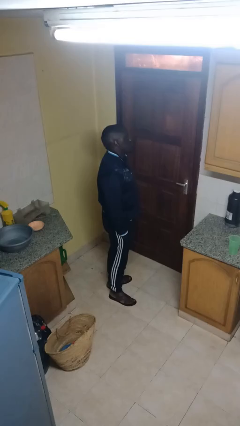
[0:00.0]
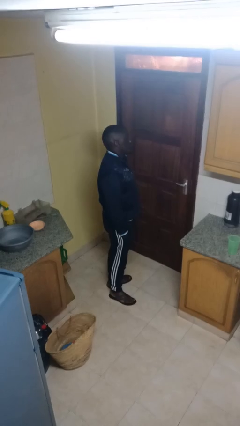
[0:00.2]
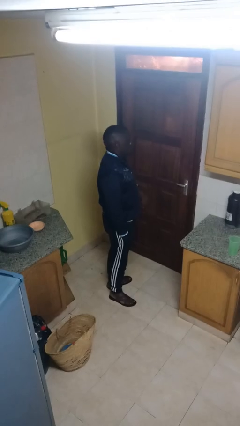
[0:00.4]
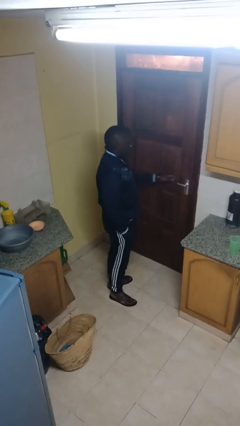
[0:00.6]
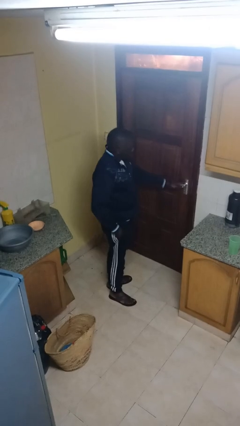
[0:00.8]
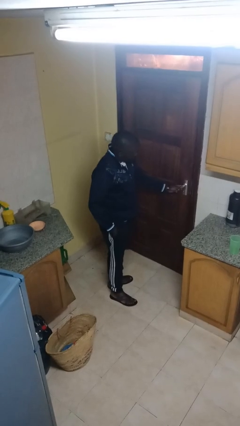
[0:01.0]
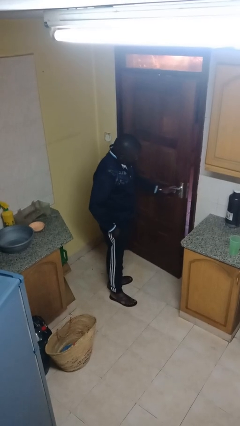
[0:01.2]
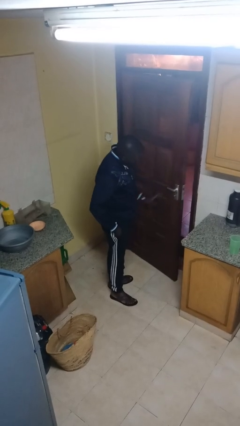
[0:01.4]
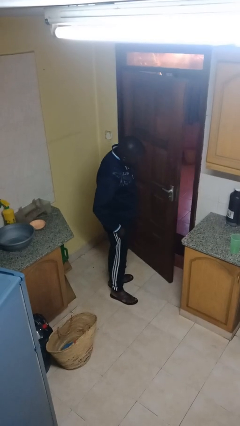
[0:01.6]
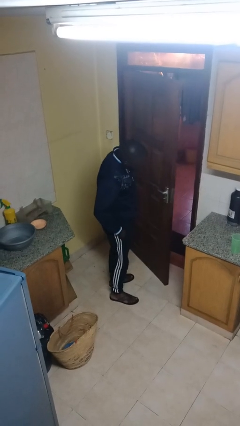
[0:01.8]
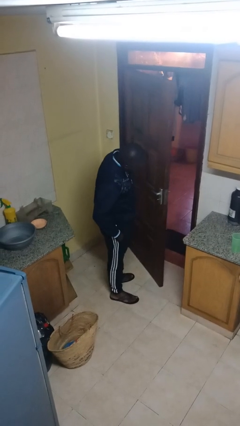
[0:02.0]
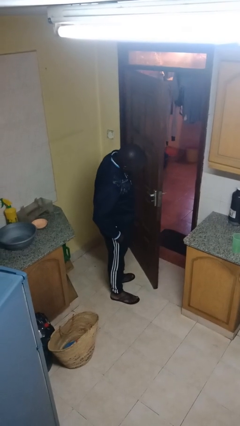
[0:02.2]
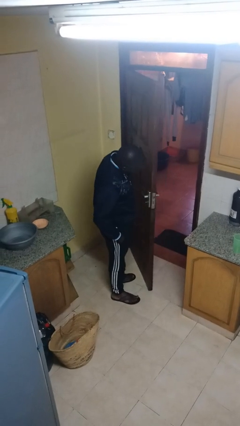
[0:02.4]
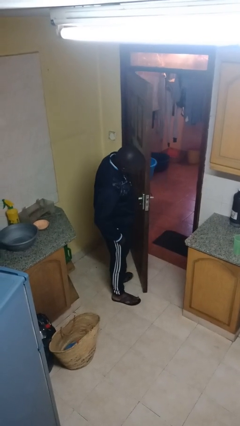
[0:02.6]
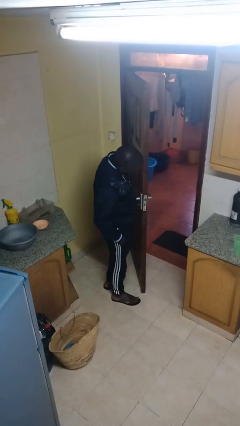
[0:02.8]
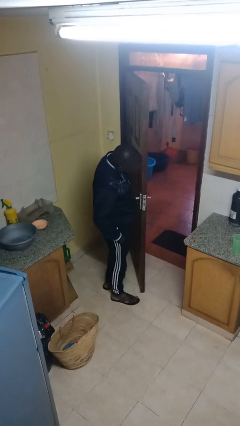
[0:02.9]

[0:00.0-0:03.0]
person opens facility door

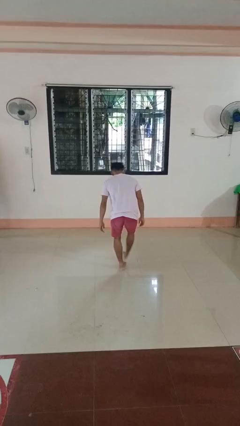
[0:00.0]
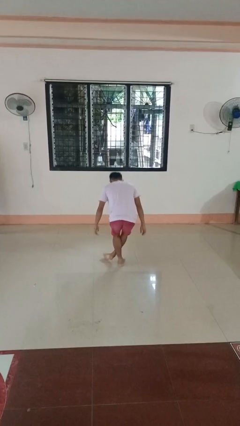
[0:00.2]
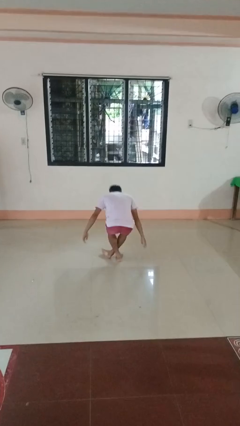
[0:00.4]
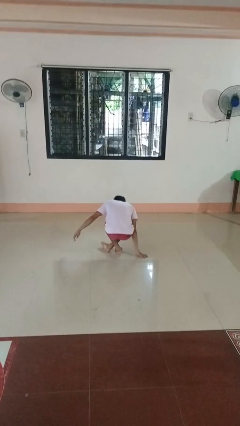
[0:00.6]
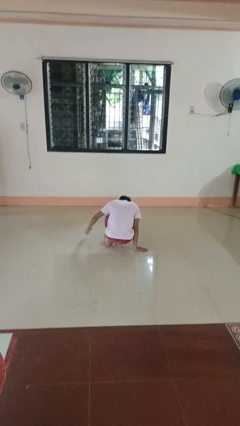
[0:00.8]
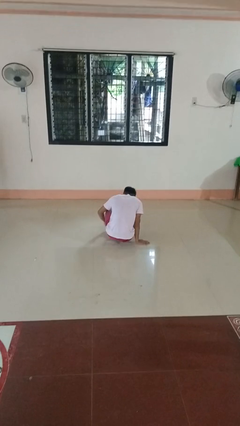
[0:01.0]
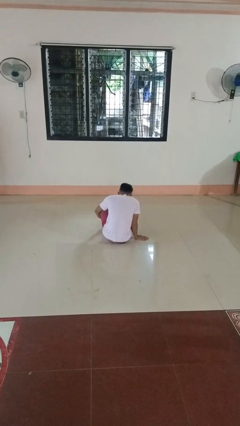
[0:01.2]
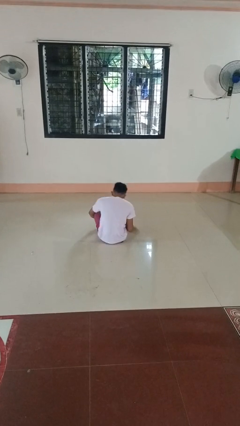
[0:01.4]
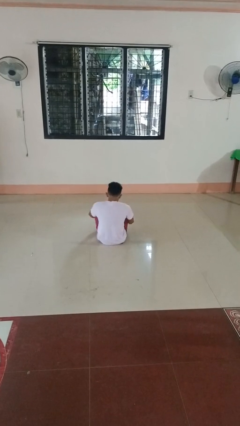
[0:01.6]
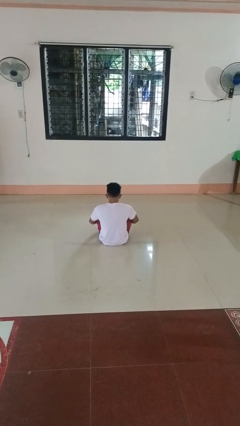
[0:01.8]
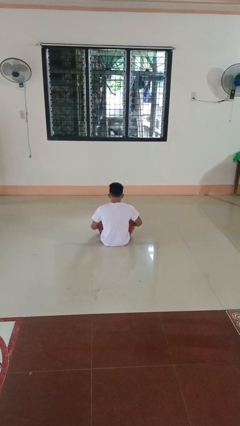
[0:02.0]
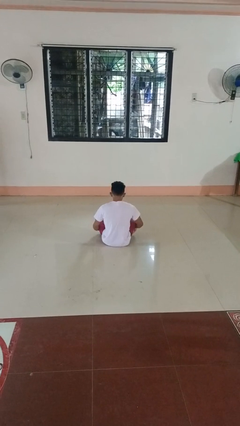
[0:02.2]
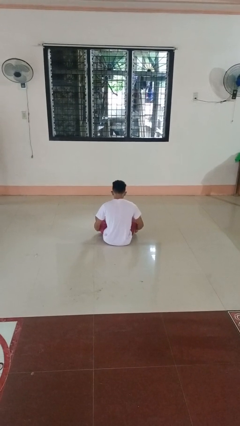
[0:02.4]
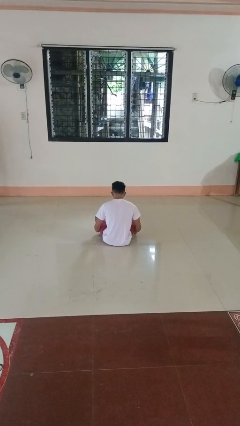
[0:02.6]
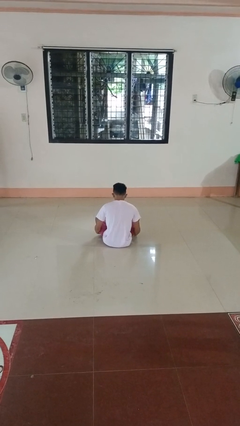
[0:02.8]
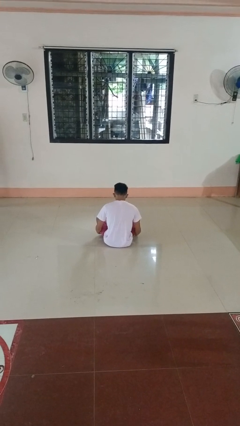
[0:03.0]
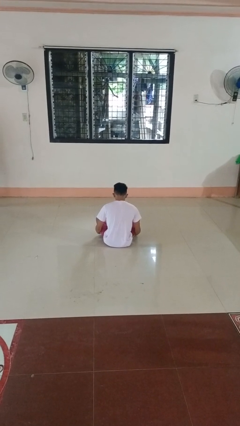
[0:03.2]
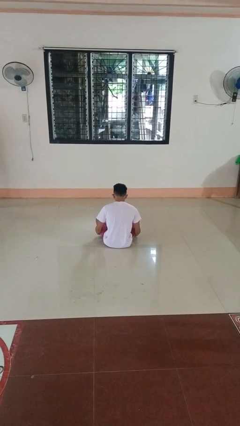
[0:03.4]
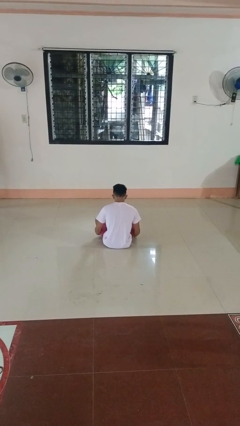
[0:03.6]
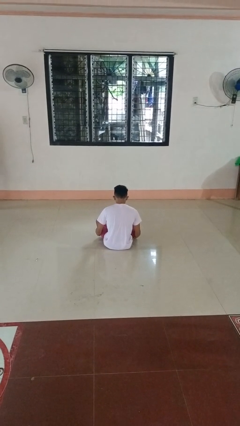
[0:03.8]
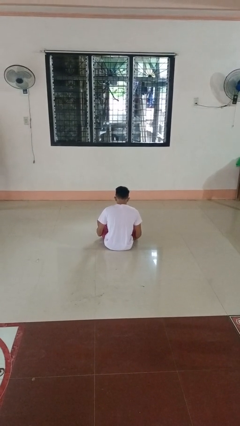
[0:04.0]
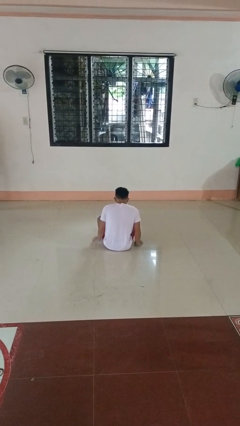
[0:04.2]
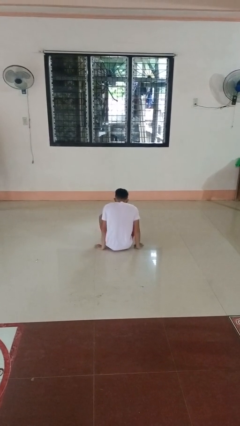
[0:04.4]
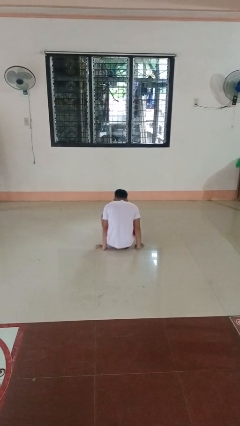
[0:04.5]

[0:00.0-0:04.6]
person sits crisscross

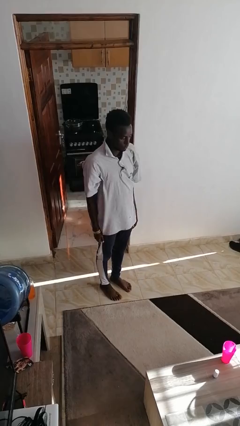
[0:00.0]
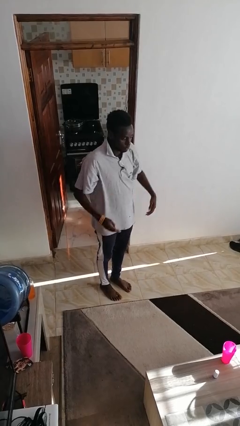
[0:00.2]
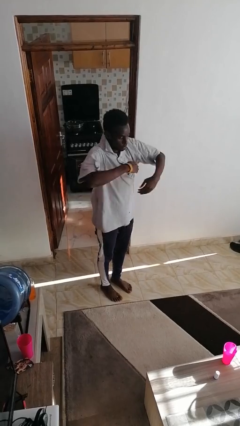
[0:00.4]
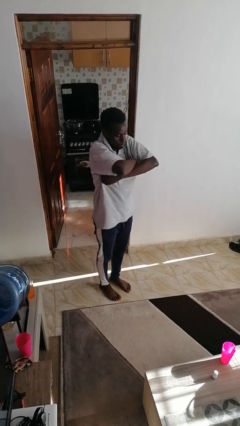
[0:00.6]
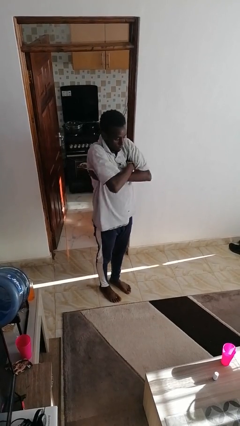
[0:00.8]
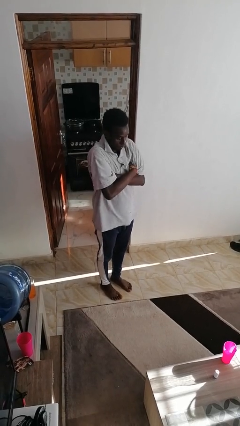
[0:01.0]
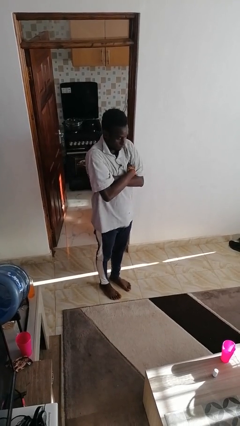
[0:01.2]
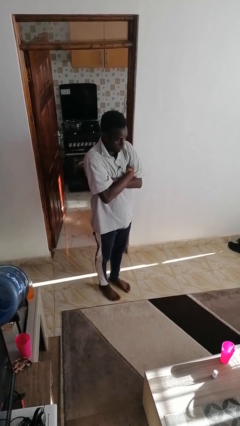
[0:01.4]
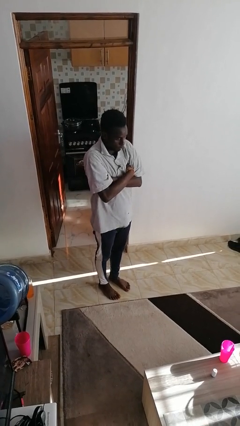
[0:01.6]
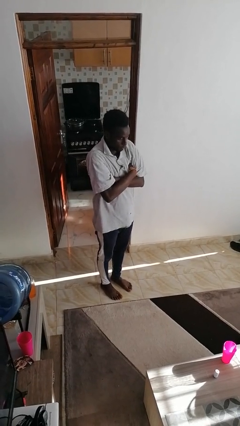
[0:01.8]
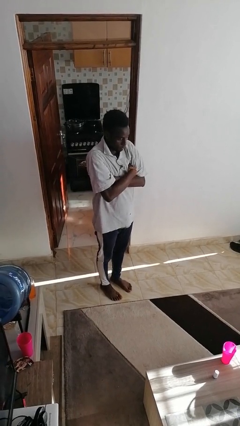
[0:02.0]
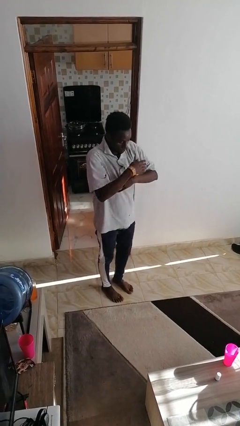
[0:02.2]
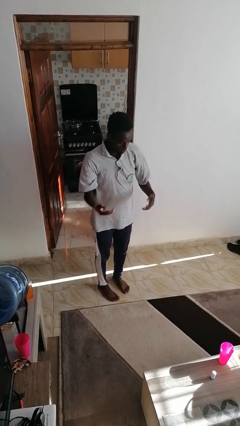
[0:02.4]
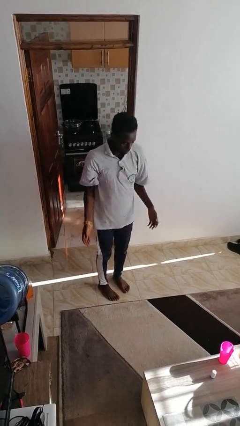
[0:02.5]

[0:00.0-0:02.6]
person crosses arms

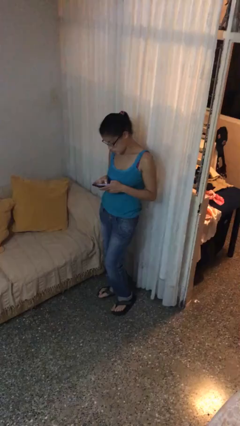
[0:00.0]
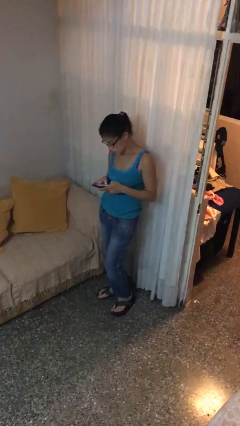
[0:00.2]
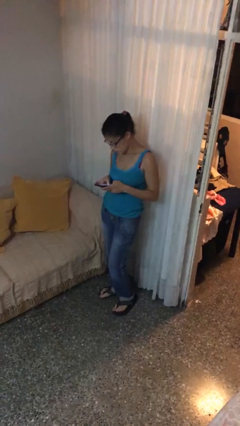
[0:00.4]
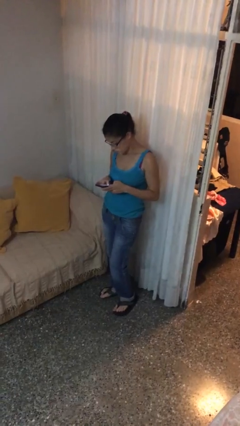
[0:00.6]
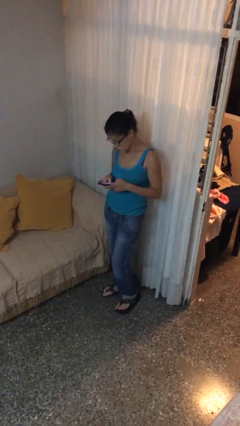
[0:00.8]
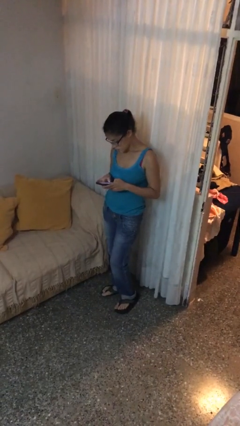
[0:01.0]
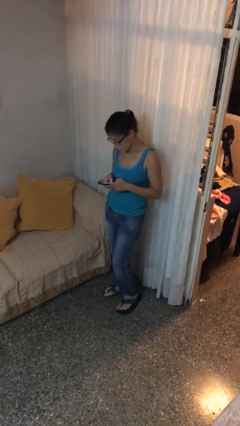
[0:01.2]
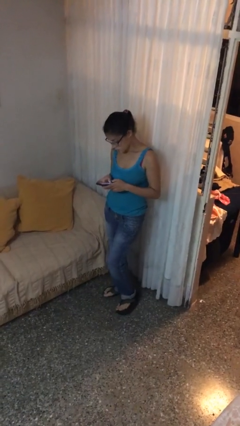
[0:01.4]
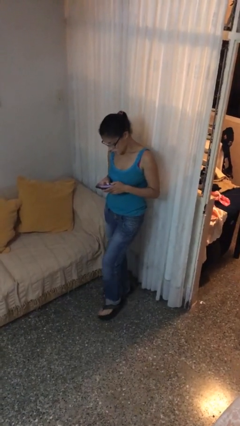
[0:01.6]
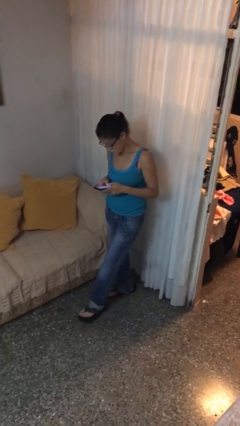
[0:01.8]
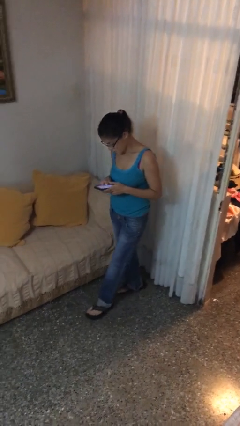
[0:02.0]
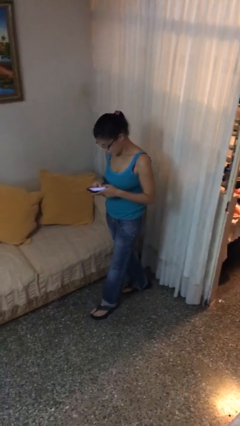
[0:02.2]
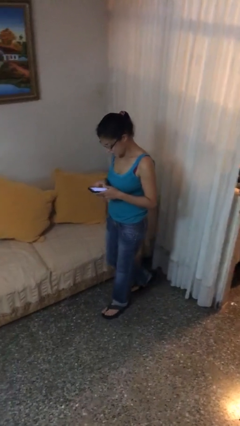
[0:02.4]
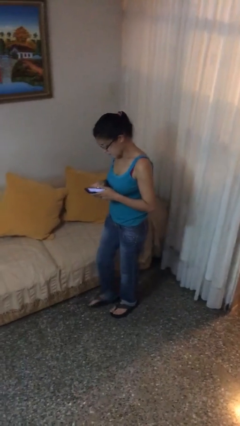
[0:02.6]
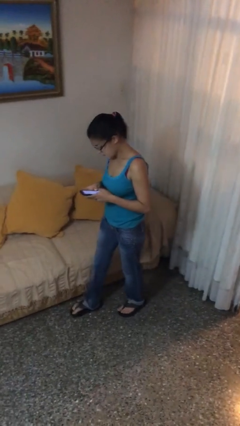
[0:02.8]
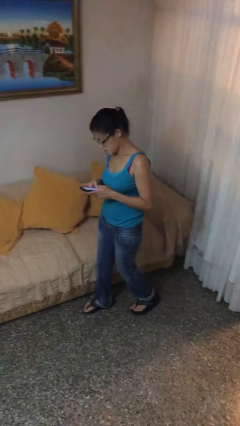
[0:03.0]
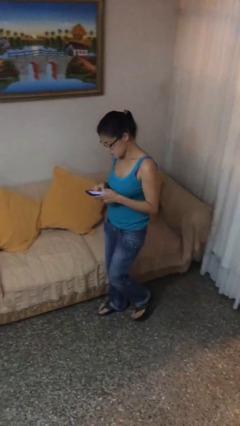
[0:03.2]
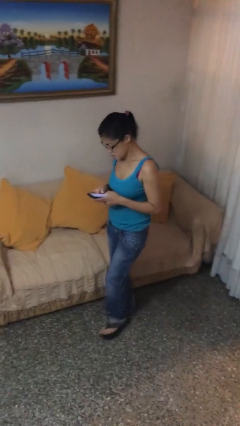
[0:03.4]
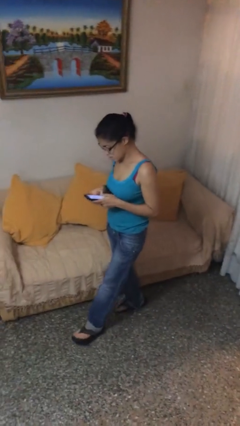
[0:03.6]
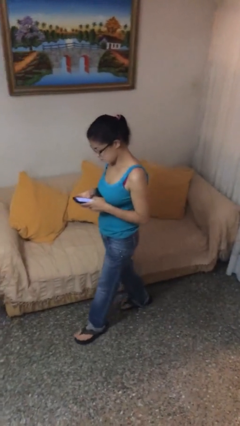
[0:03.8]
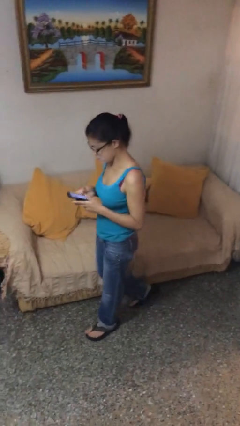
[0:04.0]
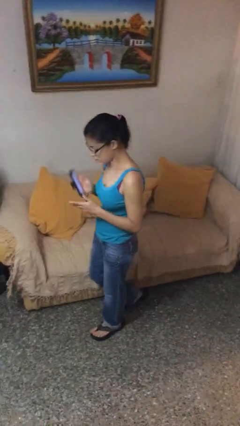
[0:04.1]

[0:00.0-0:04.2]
person texts on phone

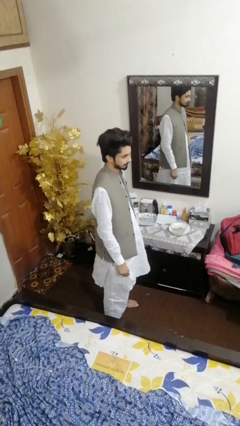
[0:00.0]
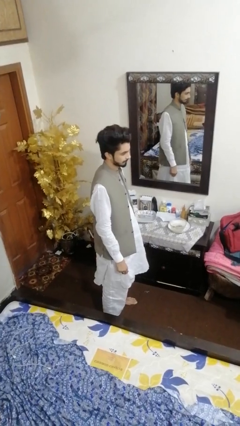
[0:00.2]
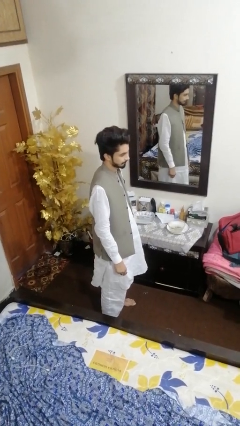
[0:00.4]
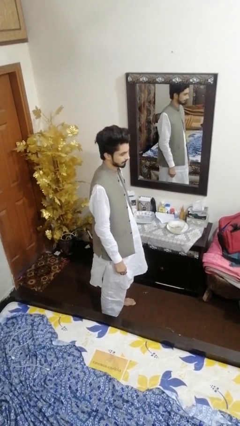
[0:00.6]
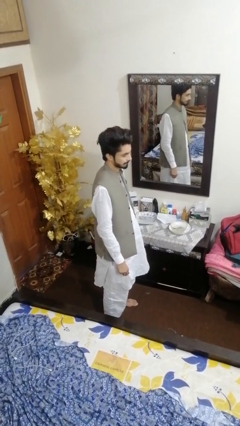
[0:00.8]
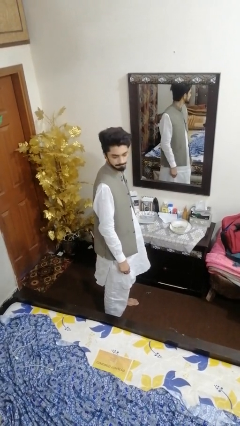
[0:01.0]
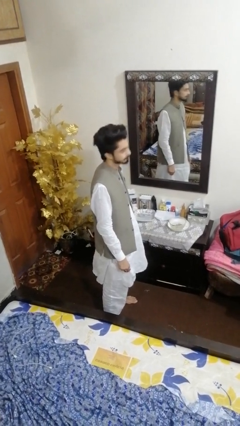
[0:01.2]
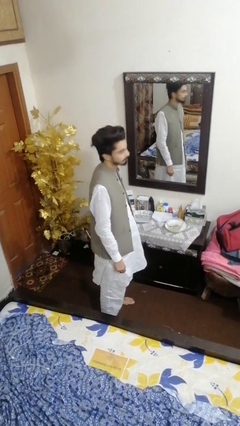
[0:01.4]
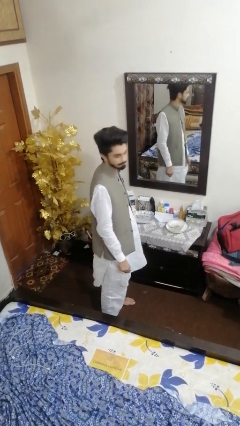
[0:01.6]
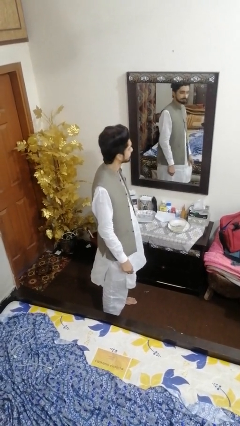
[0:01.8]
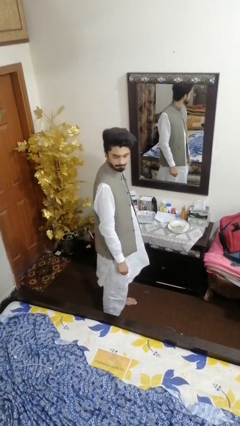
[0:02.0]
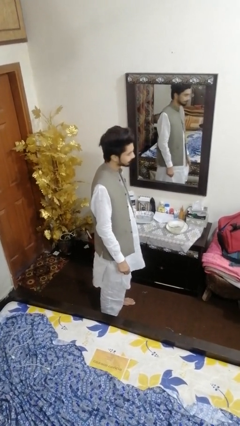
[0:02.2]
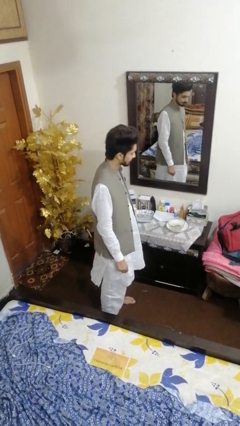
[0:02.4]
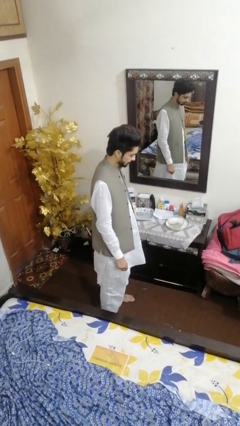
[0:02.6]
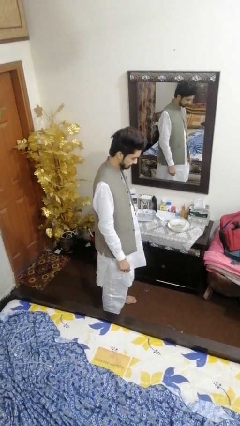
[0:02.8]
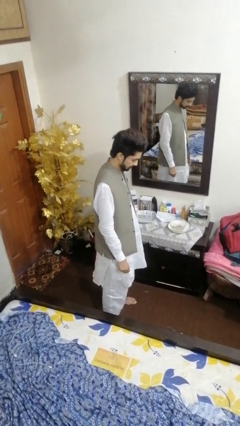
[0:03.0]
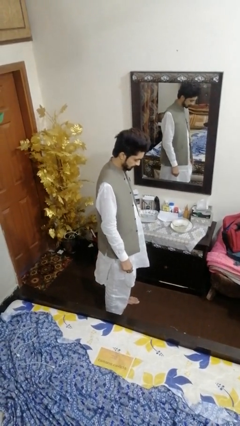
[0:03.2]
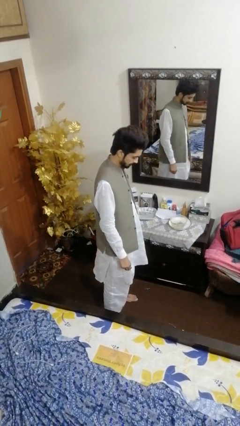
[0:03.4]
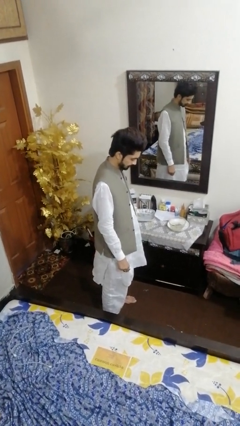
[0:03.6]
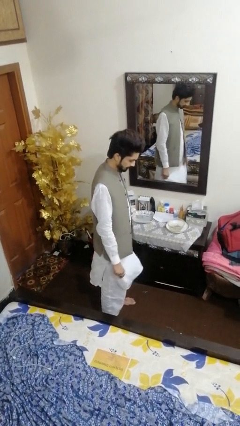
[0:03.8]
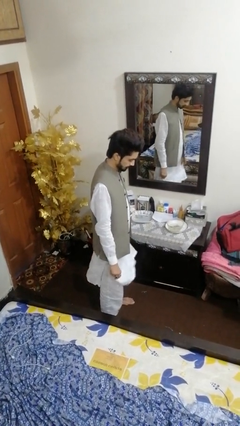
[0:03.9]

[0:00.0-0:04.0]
person shakes head
